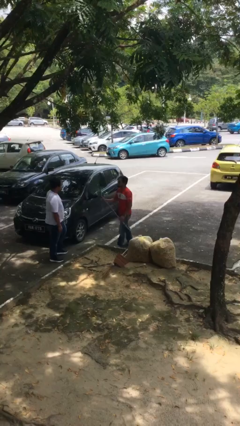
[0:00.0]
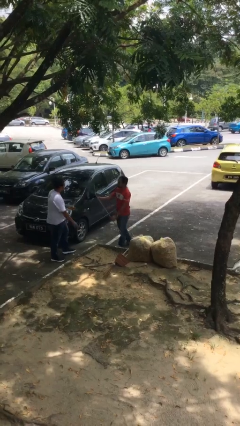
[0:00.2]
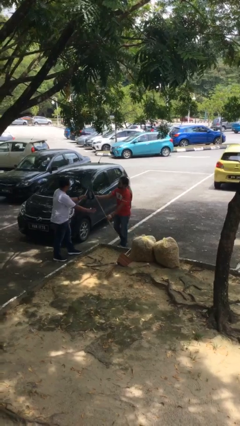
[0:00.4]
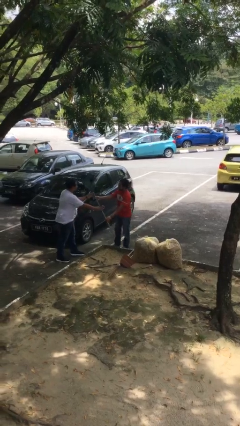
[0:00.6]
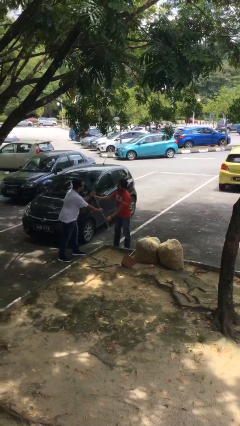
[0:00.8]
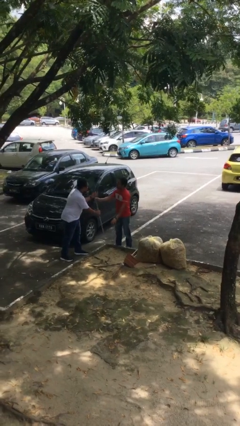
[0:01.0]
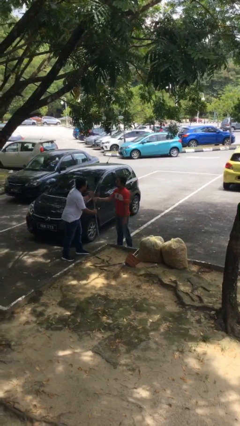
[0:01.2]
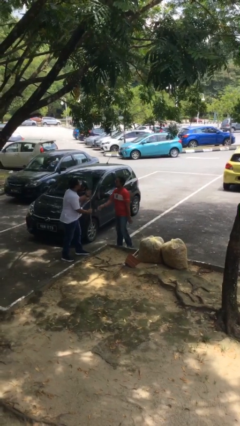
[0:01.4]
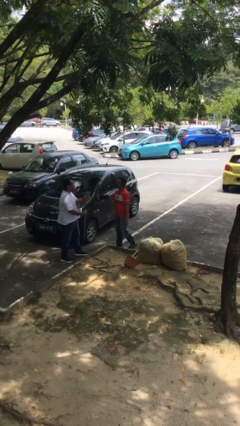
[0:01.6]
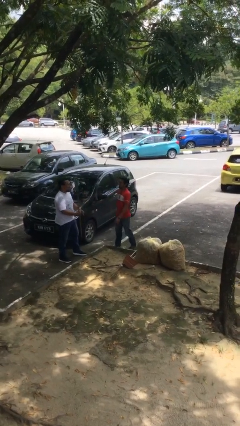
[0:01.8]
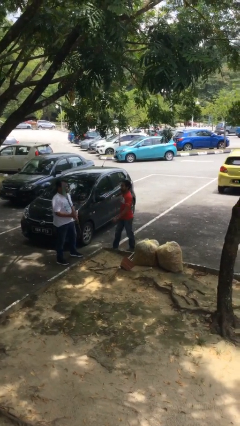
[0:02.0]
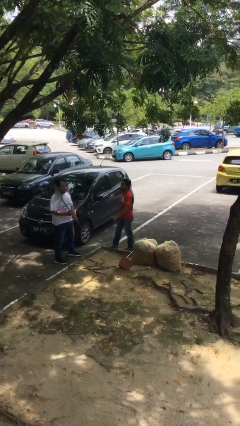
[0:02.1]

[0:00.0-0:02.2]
person transfers object to person

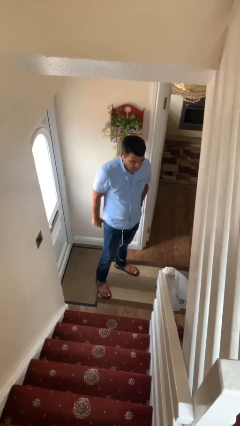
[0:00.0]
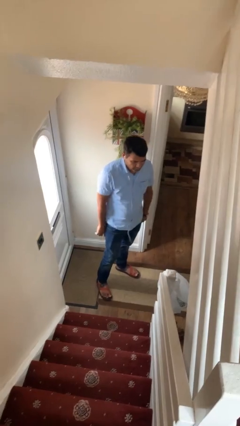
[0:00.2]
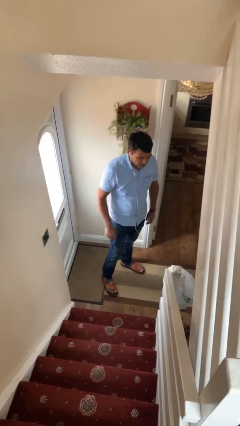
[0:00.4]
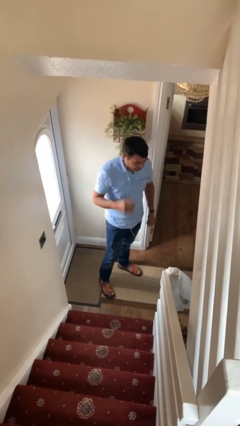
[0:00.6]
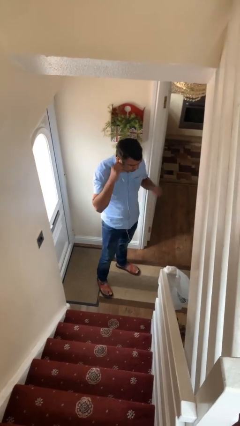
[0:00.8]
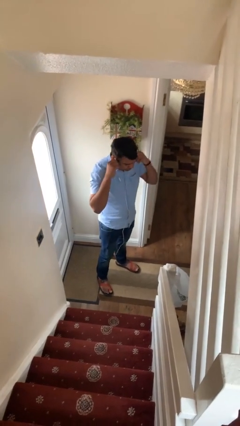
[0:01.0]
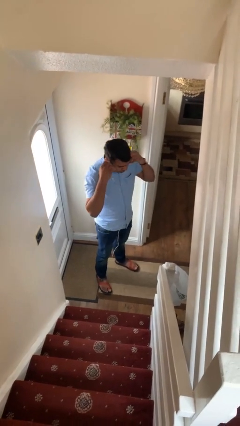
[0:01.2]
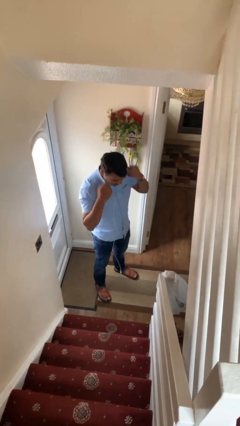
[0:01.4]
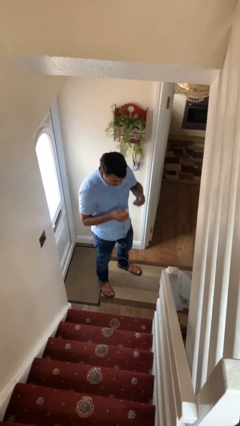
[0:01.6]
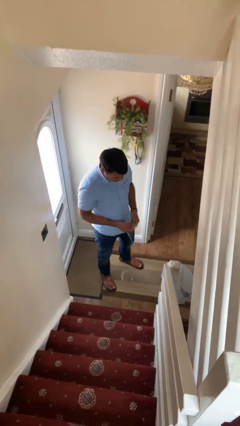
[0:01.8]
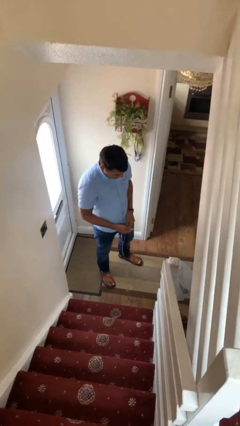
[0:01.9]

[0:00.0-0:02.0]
person takes off headphones

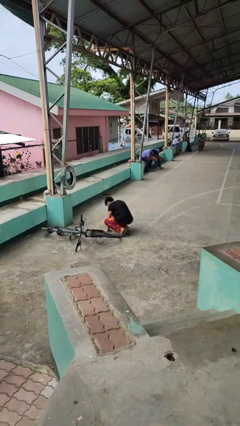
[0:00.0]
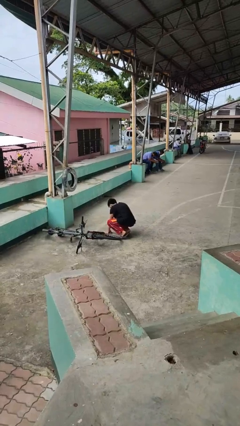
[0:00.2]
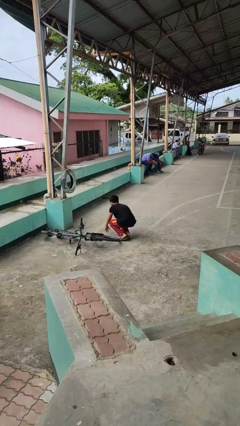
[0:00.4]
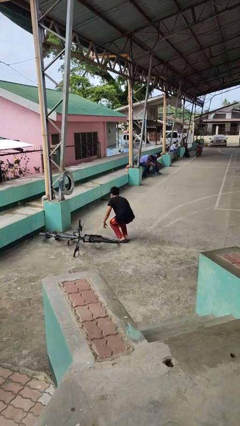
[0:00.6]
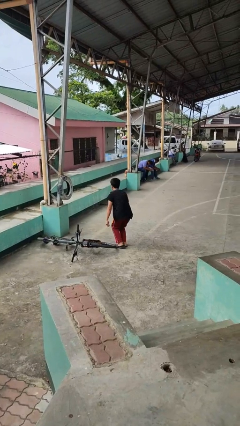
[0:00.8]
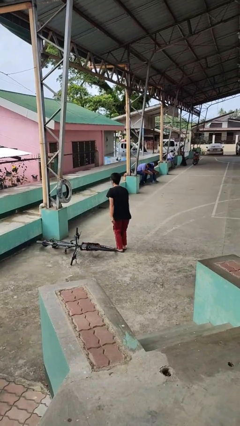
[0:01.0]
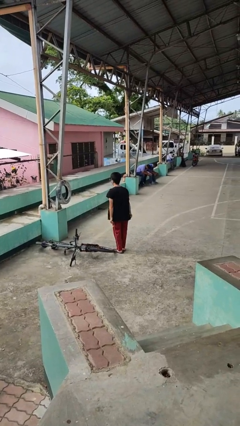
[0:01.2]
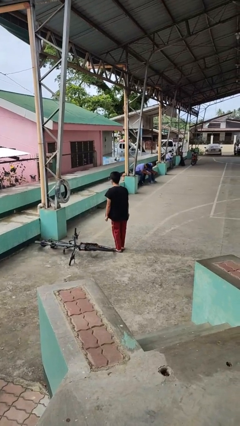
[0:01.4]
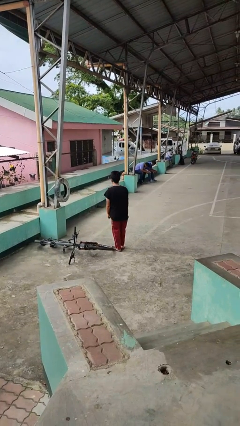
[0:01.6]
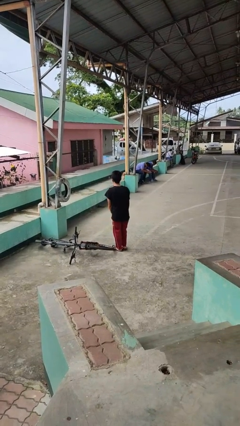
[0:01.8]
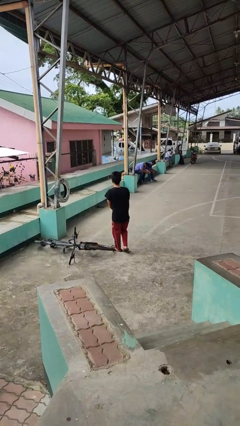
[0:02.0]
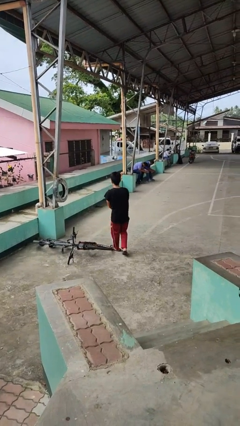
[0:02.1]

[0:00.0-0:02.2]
person stands up from floor

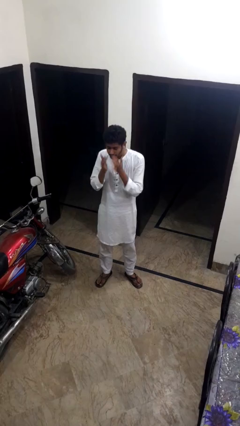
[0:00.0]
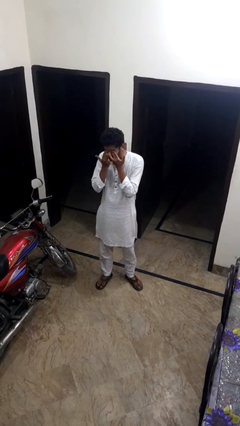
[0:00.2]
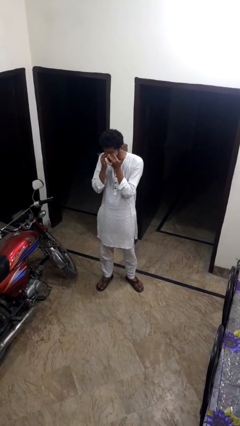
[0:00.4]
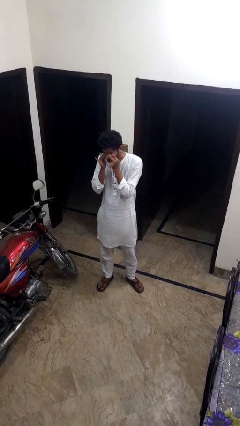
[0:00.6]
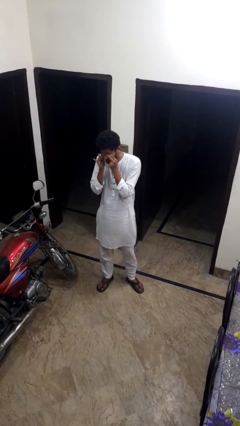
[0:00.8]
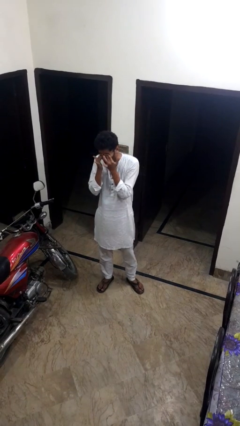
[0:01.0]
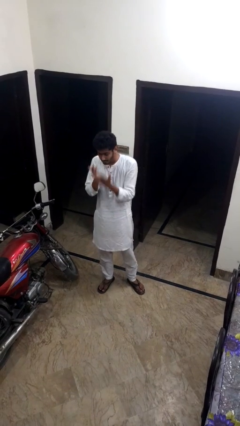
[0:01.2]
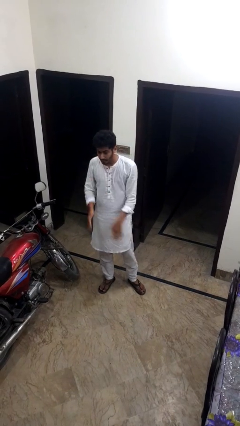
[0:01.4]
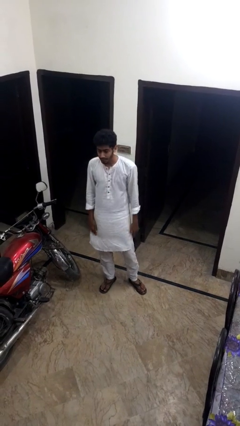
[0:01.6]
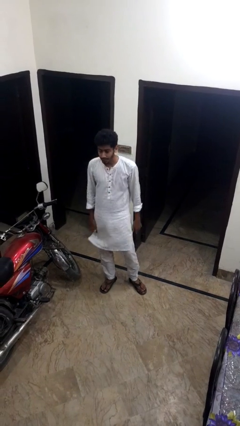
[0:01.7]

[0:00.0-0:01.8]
person rubs eyes

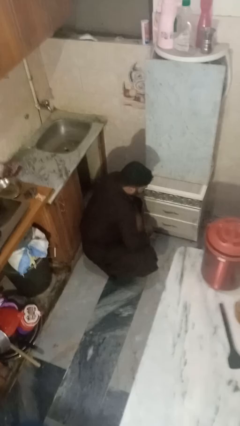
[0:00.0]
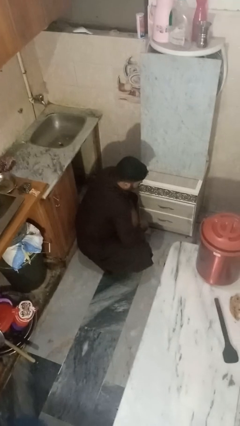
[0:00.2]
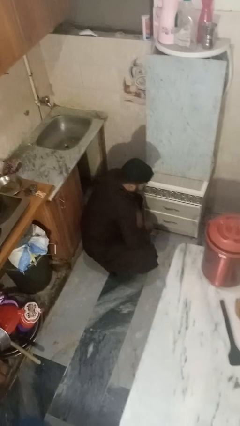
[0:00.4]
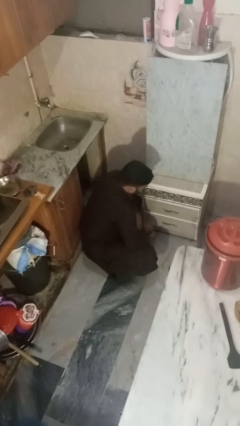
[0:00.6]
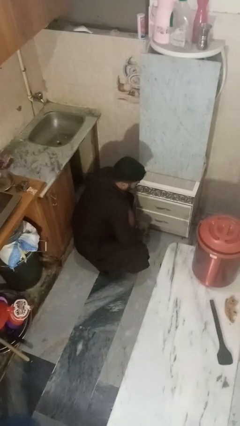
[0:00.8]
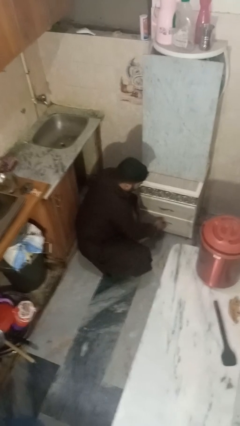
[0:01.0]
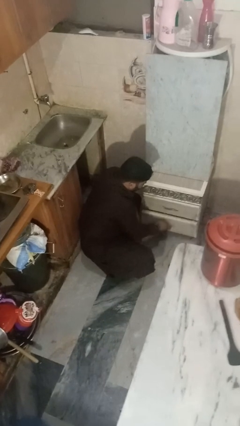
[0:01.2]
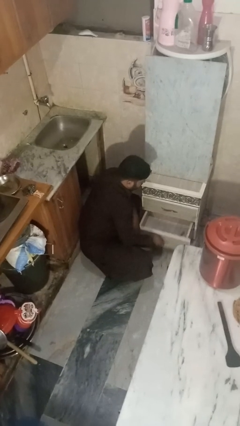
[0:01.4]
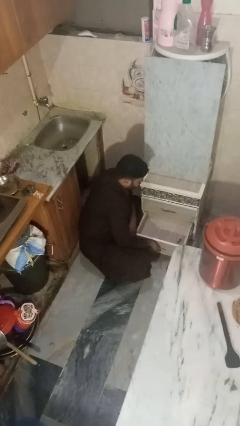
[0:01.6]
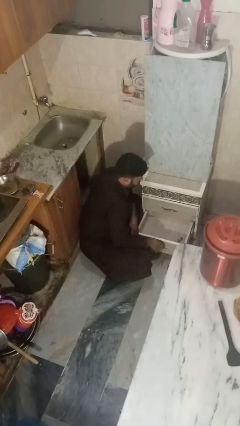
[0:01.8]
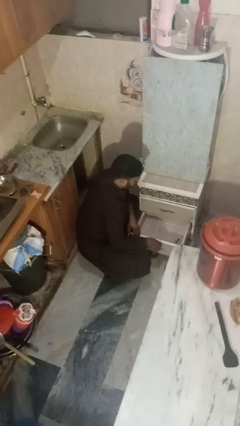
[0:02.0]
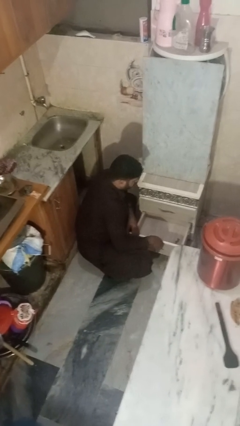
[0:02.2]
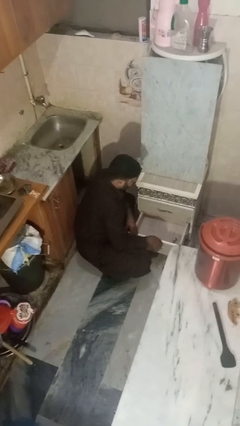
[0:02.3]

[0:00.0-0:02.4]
person opens kitchen drawer

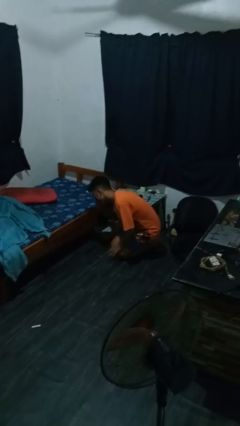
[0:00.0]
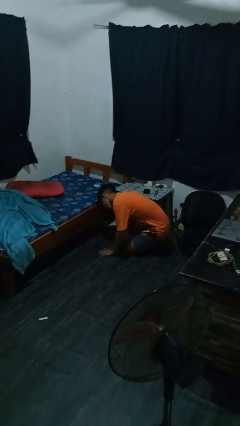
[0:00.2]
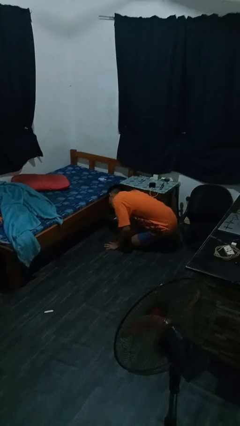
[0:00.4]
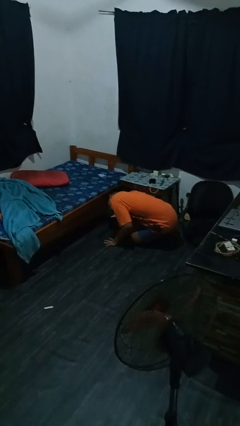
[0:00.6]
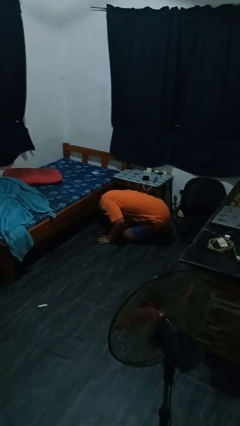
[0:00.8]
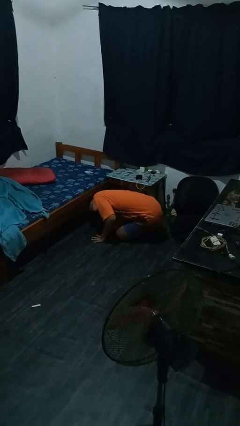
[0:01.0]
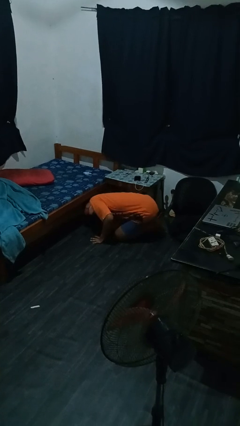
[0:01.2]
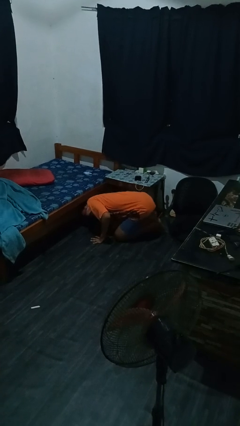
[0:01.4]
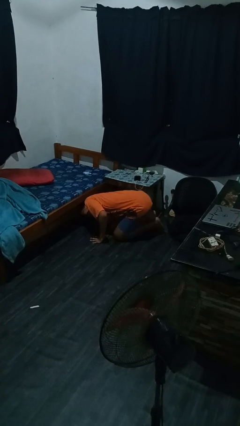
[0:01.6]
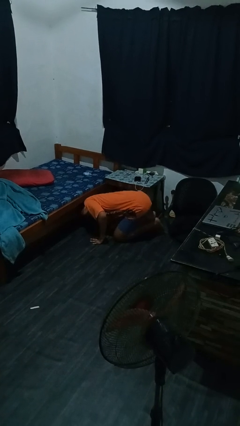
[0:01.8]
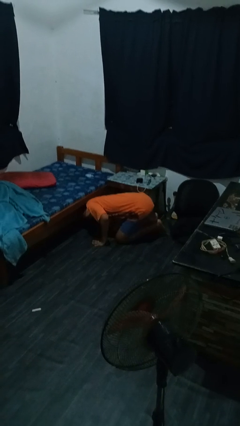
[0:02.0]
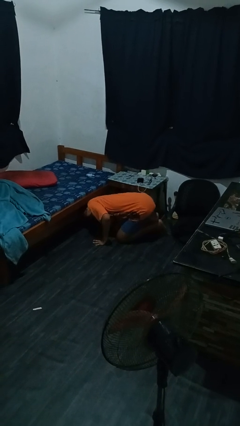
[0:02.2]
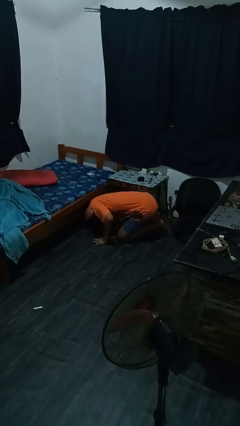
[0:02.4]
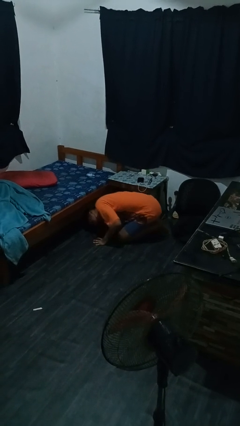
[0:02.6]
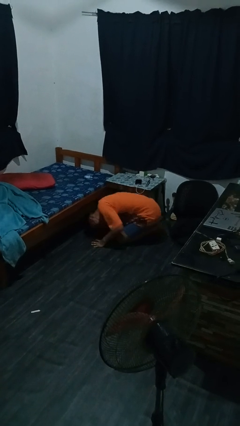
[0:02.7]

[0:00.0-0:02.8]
person searches under bed

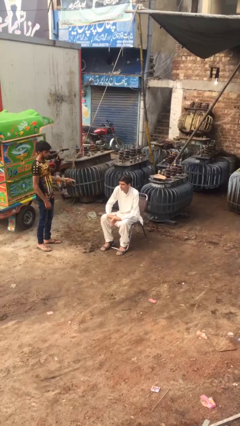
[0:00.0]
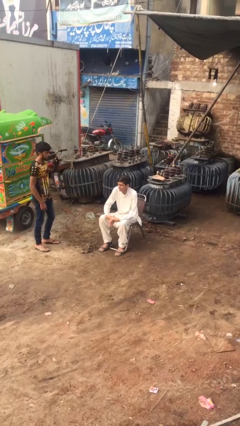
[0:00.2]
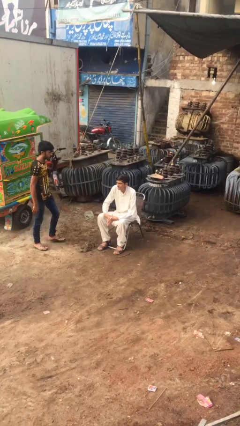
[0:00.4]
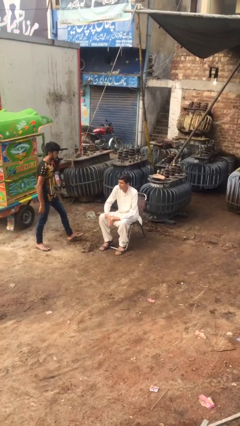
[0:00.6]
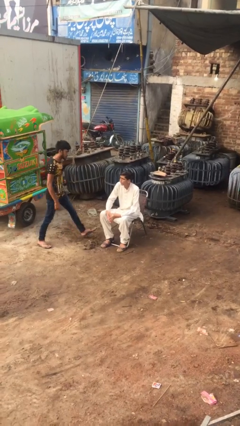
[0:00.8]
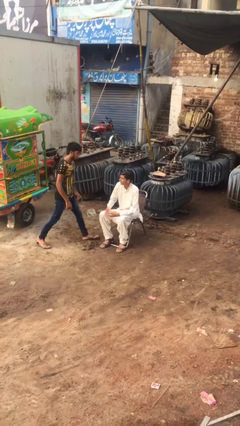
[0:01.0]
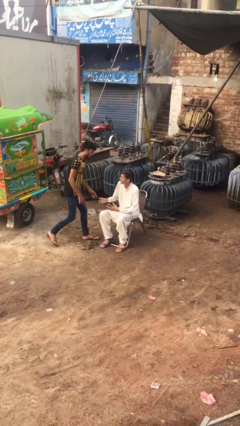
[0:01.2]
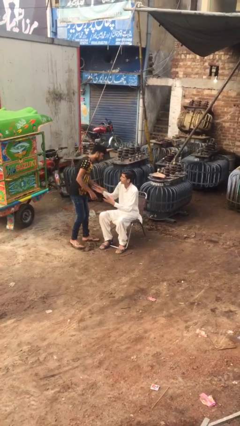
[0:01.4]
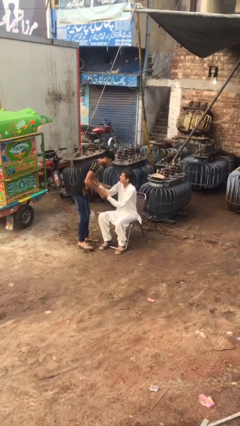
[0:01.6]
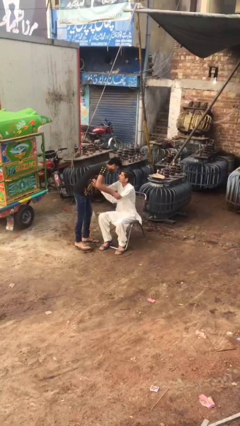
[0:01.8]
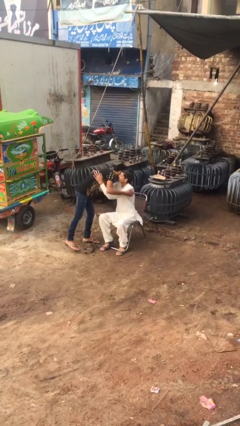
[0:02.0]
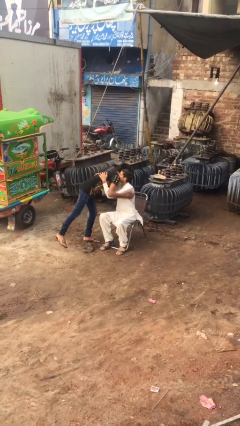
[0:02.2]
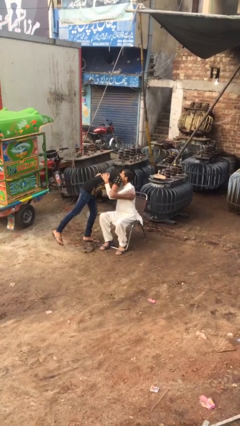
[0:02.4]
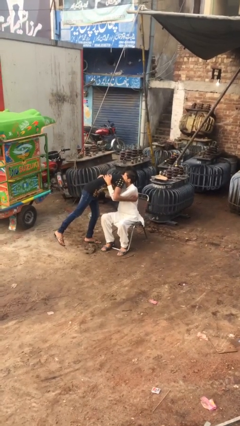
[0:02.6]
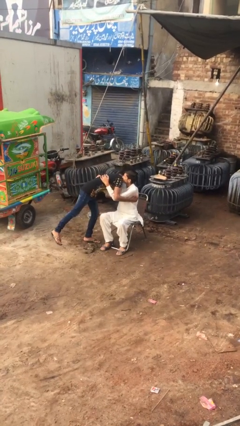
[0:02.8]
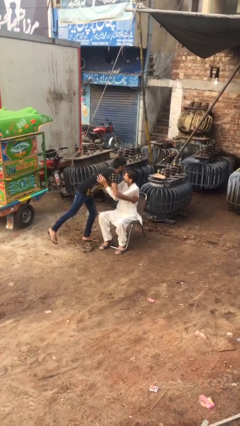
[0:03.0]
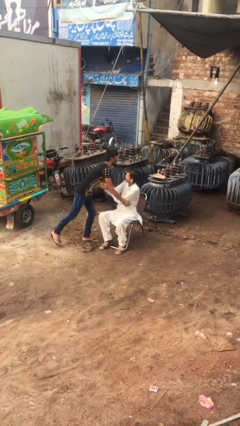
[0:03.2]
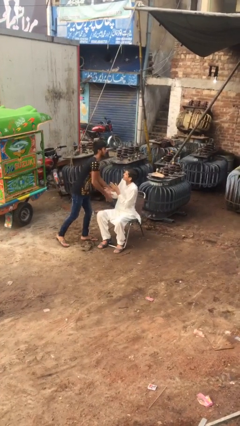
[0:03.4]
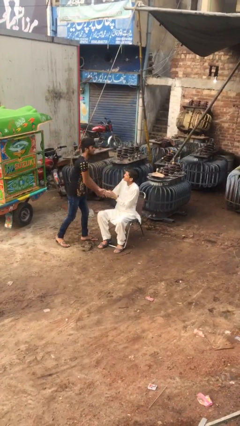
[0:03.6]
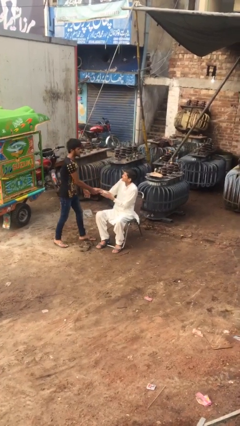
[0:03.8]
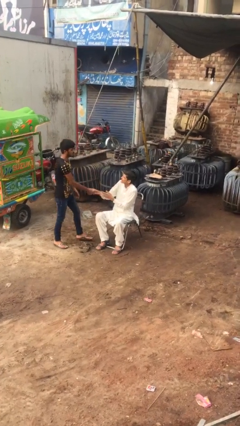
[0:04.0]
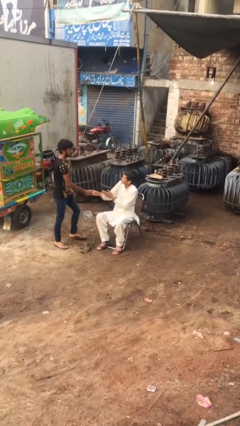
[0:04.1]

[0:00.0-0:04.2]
person embraces person
